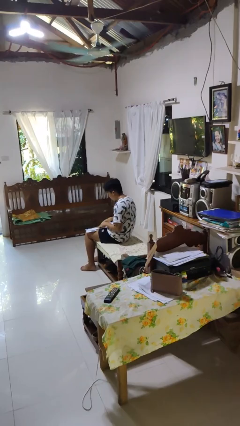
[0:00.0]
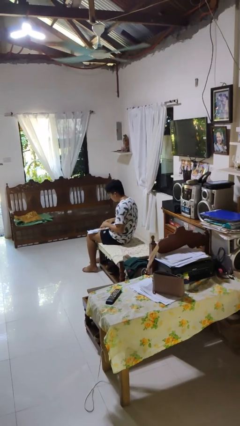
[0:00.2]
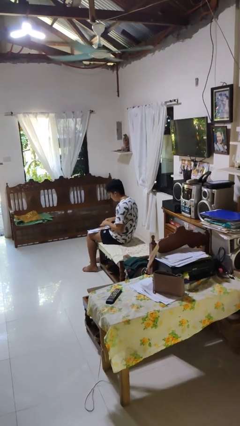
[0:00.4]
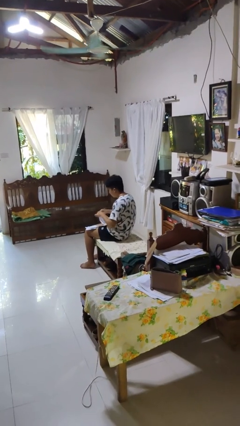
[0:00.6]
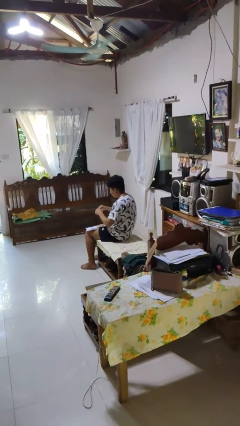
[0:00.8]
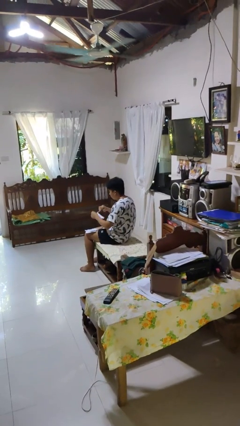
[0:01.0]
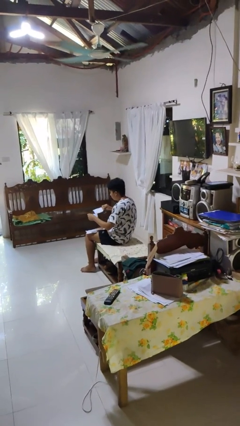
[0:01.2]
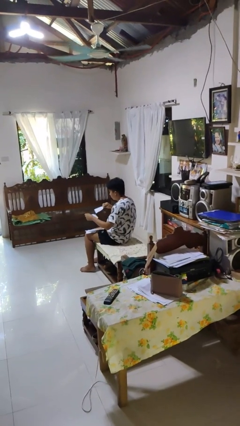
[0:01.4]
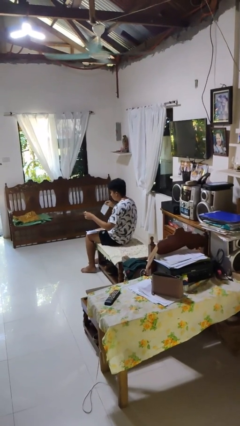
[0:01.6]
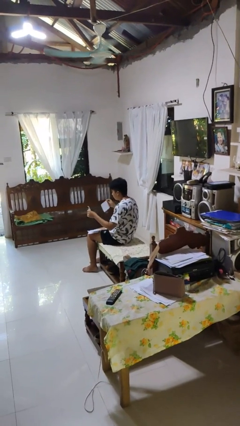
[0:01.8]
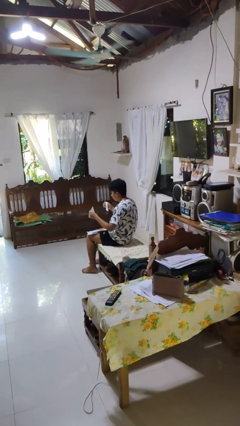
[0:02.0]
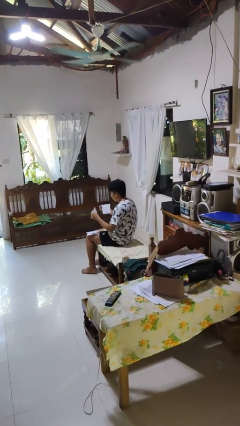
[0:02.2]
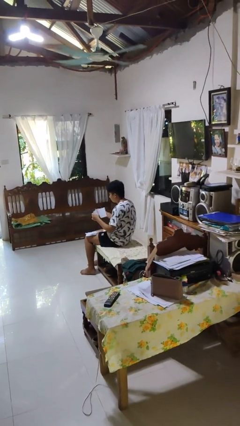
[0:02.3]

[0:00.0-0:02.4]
person tears paper

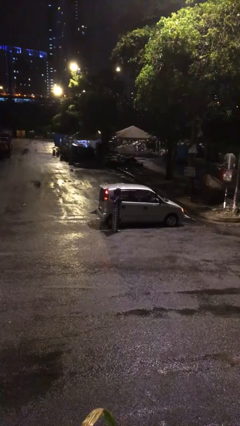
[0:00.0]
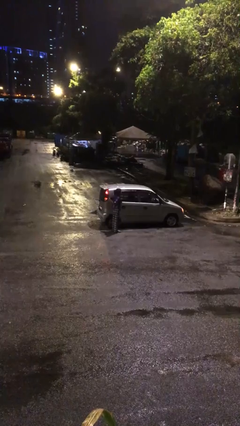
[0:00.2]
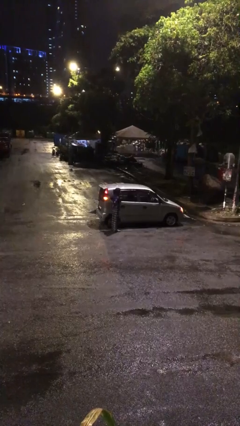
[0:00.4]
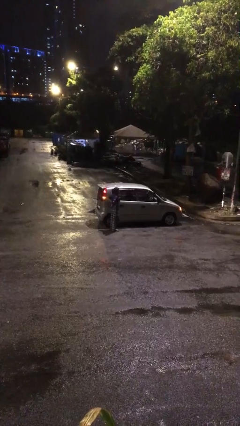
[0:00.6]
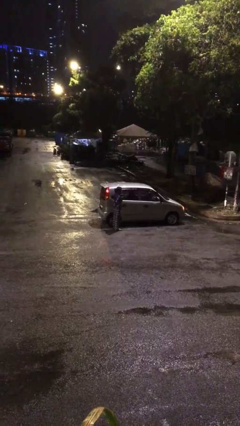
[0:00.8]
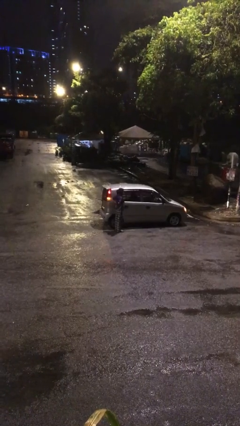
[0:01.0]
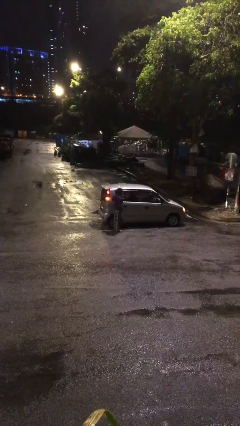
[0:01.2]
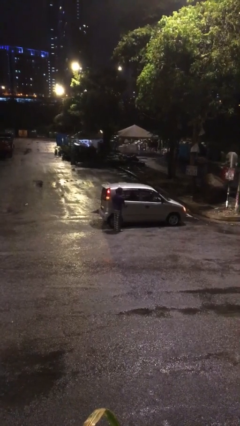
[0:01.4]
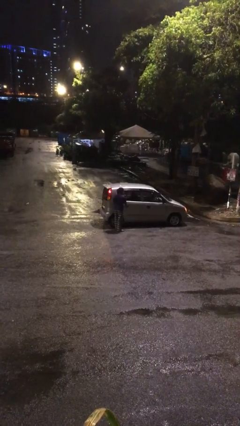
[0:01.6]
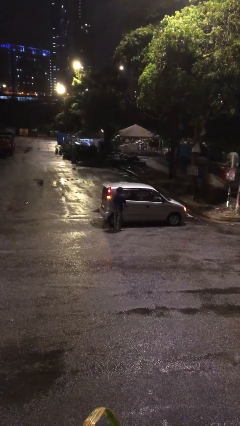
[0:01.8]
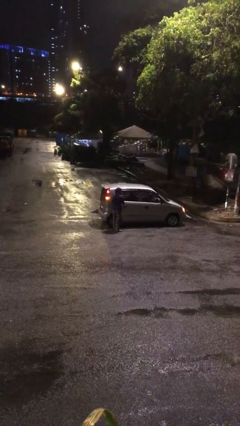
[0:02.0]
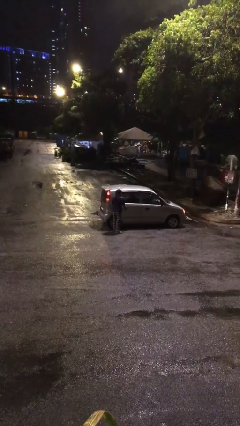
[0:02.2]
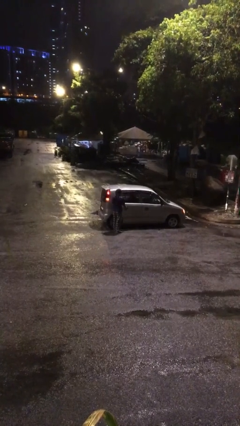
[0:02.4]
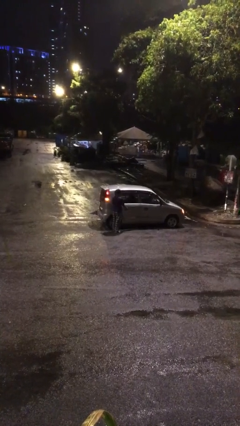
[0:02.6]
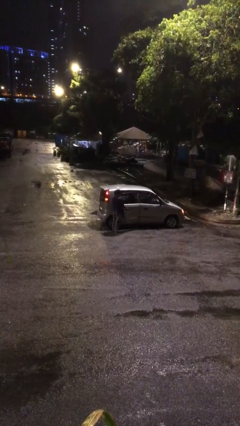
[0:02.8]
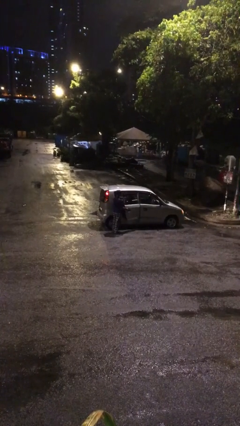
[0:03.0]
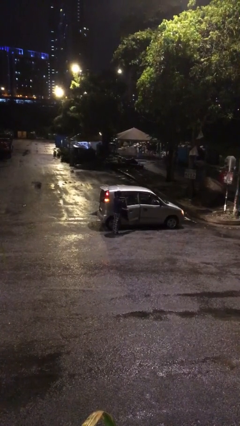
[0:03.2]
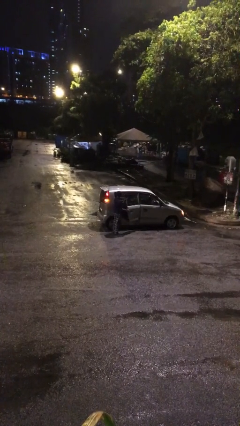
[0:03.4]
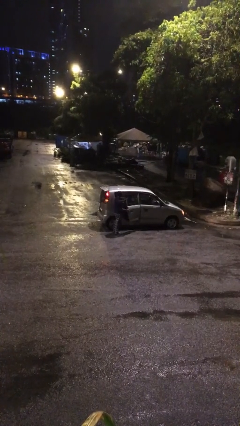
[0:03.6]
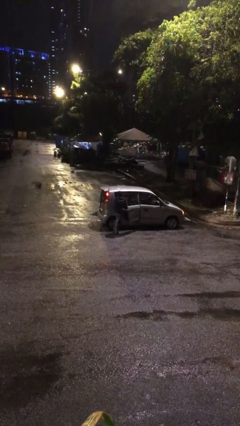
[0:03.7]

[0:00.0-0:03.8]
person opens car door

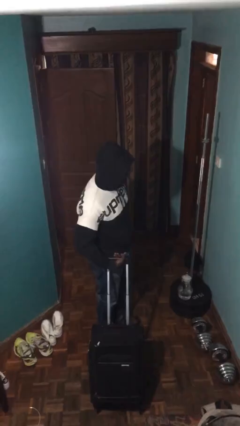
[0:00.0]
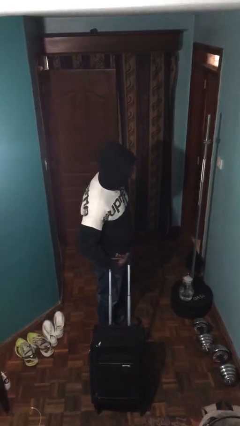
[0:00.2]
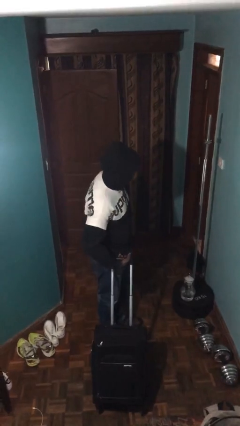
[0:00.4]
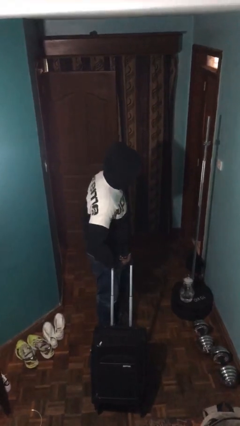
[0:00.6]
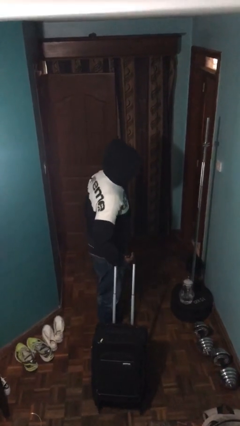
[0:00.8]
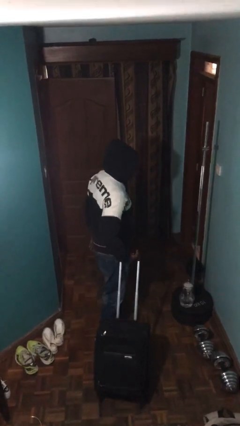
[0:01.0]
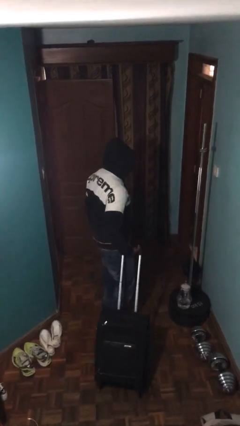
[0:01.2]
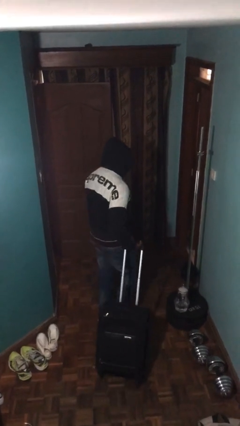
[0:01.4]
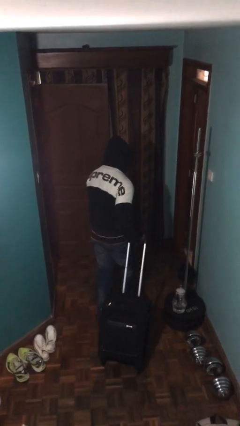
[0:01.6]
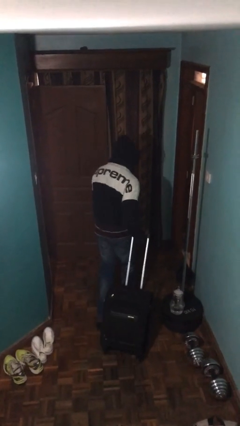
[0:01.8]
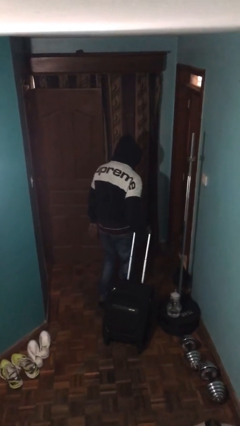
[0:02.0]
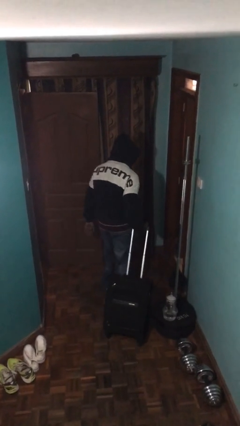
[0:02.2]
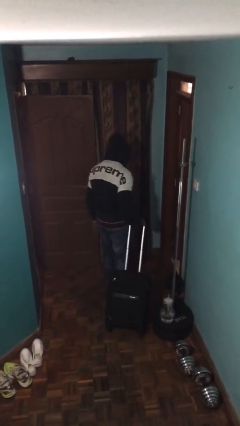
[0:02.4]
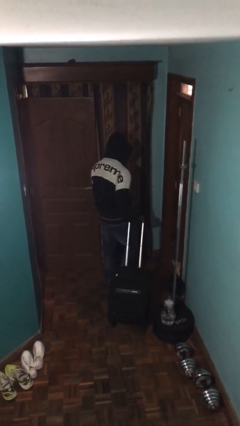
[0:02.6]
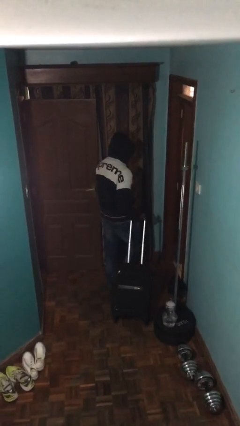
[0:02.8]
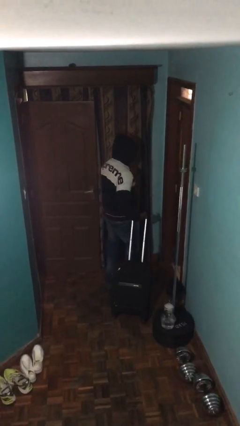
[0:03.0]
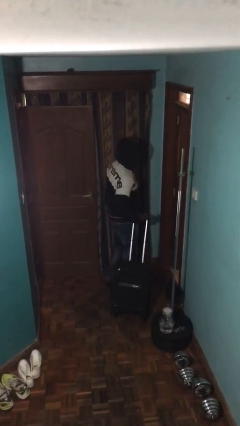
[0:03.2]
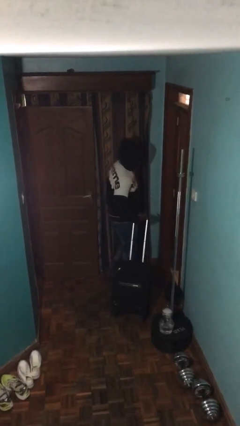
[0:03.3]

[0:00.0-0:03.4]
person pulls wheeled cart

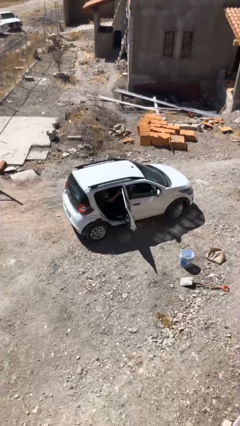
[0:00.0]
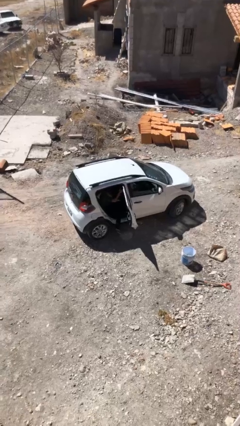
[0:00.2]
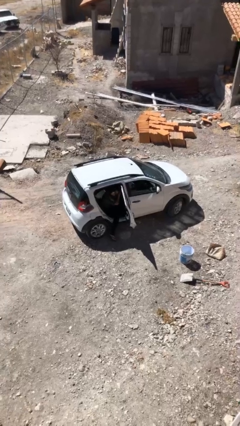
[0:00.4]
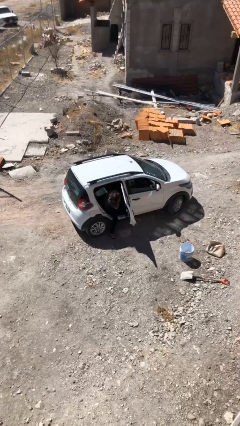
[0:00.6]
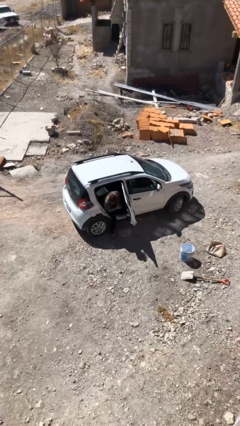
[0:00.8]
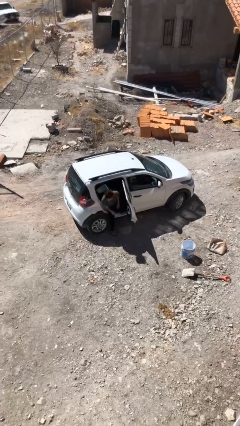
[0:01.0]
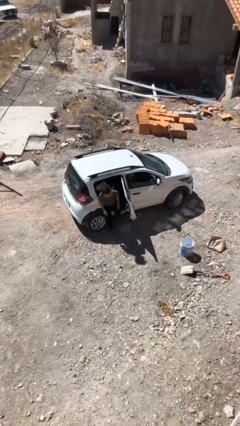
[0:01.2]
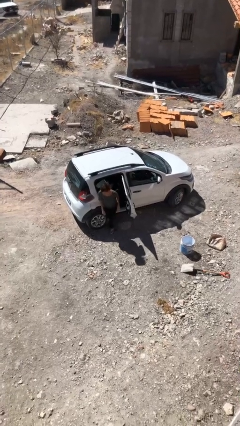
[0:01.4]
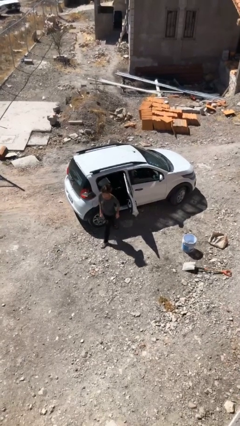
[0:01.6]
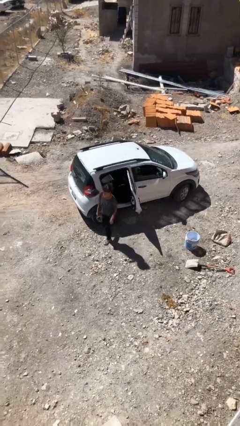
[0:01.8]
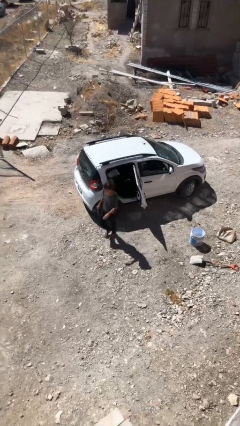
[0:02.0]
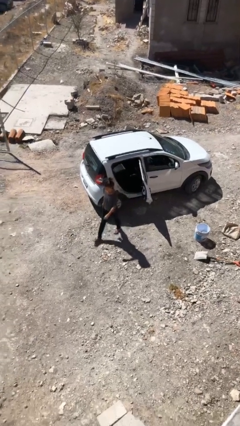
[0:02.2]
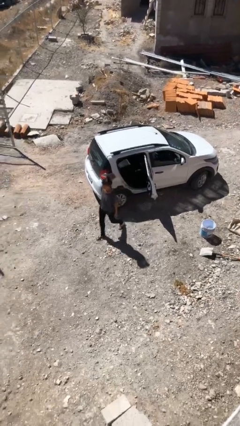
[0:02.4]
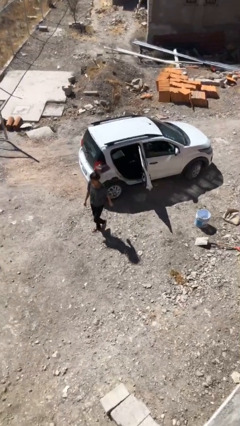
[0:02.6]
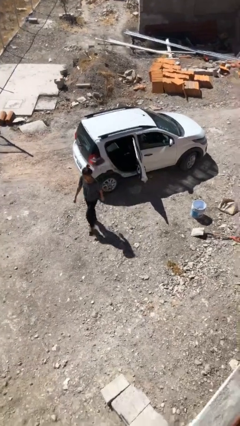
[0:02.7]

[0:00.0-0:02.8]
person exits car

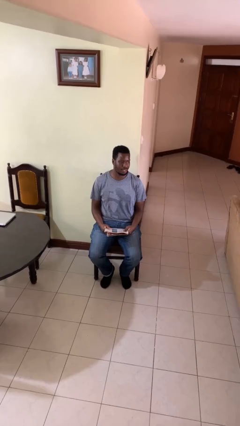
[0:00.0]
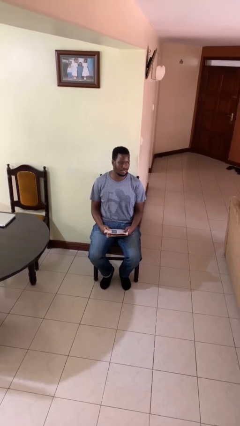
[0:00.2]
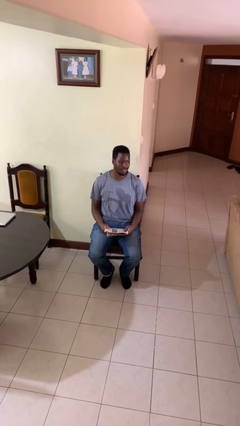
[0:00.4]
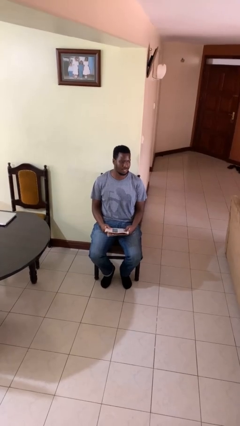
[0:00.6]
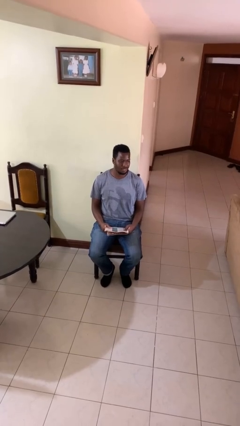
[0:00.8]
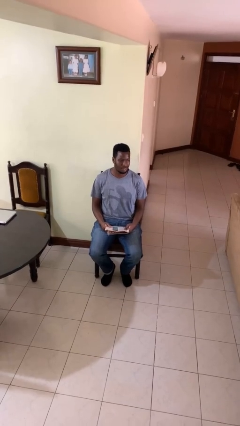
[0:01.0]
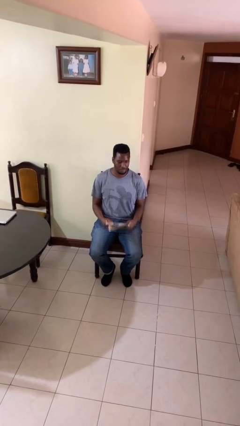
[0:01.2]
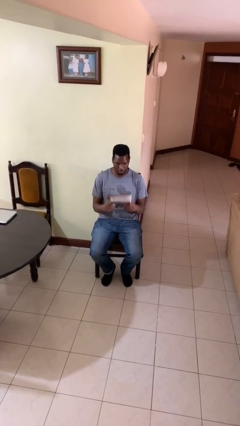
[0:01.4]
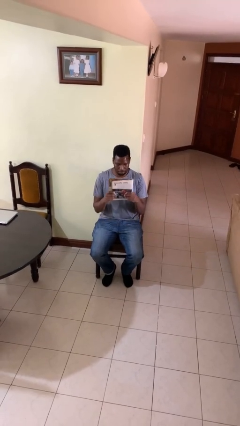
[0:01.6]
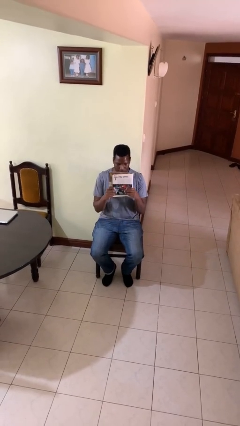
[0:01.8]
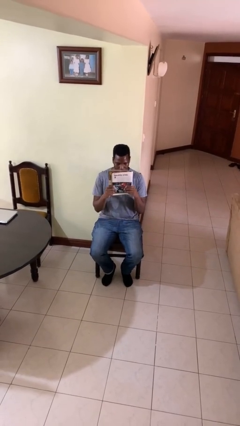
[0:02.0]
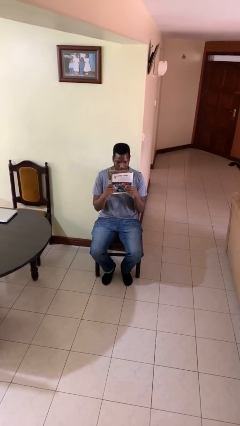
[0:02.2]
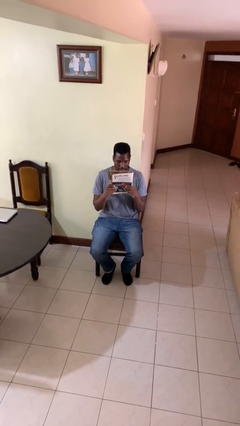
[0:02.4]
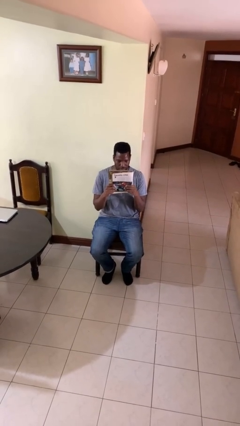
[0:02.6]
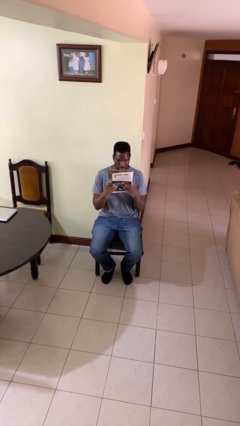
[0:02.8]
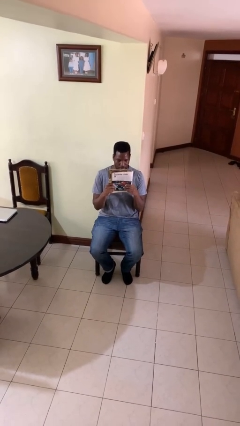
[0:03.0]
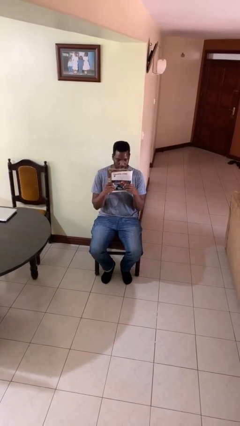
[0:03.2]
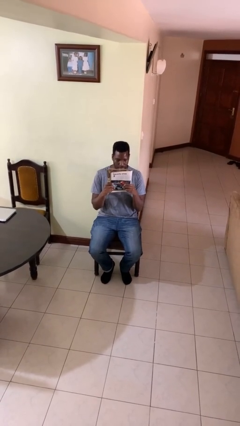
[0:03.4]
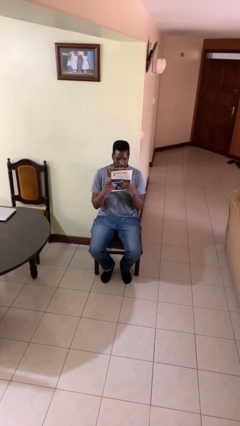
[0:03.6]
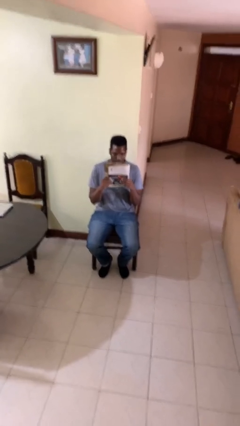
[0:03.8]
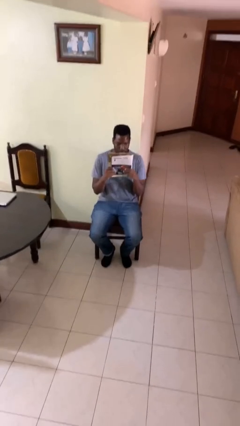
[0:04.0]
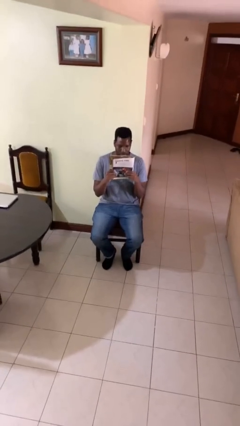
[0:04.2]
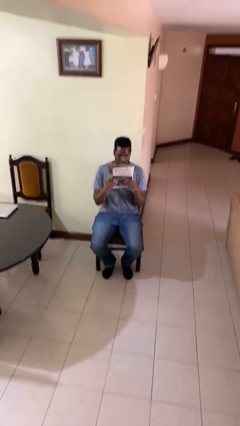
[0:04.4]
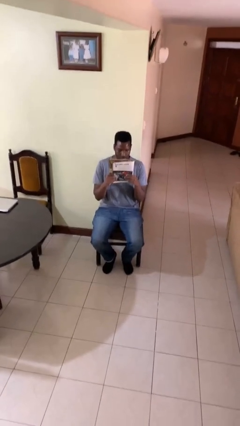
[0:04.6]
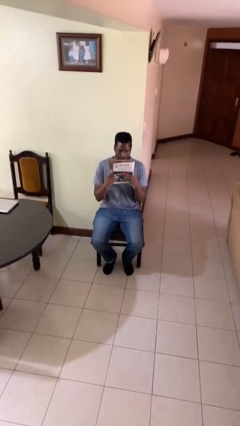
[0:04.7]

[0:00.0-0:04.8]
person reads document

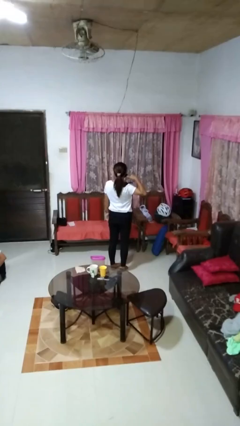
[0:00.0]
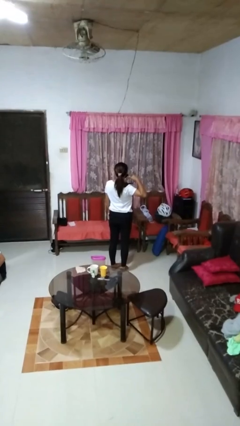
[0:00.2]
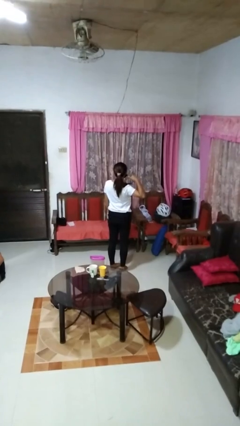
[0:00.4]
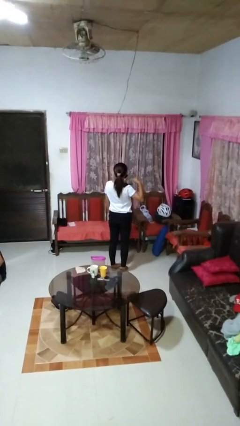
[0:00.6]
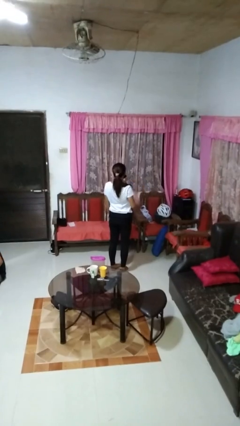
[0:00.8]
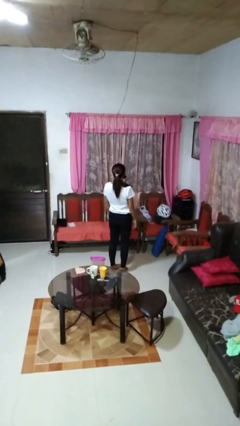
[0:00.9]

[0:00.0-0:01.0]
person gestures cut
